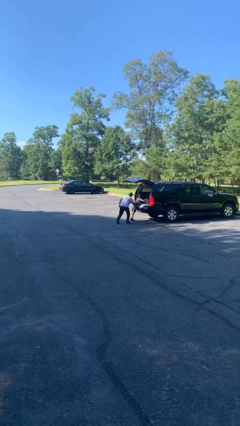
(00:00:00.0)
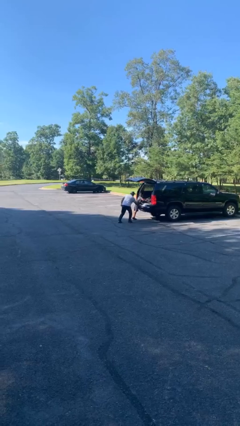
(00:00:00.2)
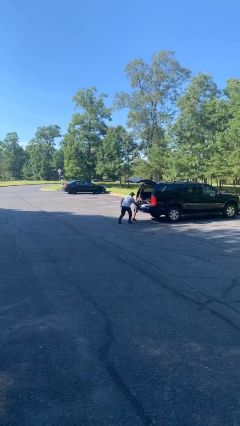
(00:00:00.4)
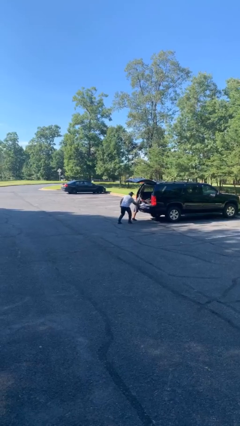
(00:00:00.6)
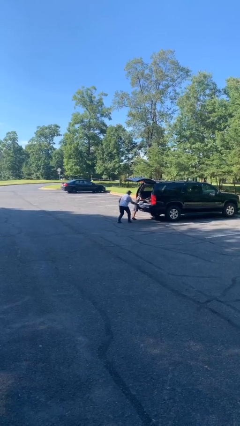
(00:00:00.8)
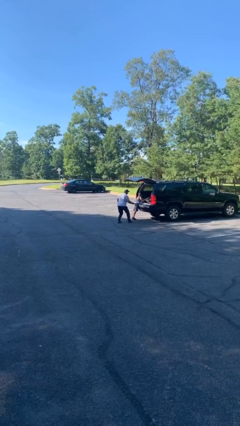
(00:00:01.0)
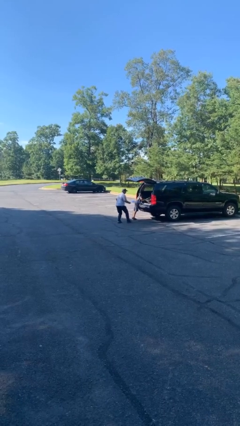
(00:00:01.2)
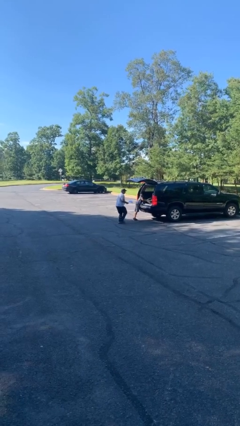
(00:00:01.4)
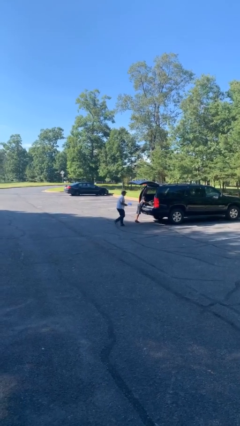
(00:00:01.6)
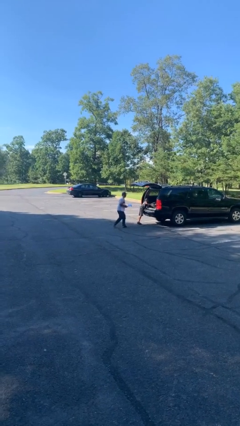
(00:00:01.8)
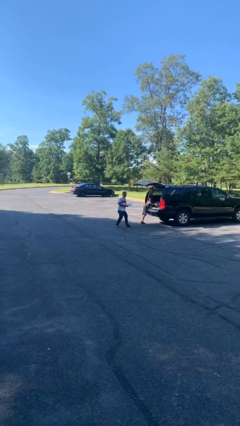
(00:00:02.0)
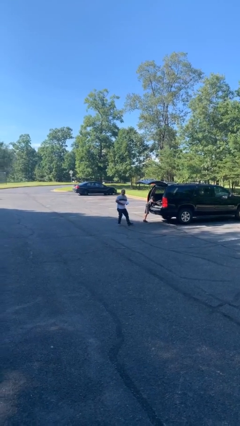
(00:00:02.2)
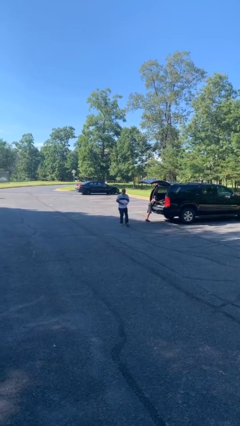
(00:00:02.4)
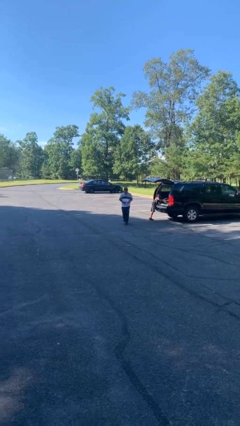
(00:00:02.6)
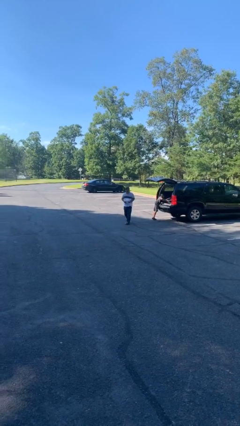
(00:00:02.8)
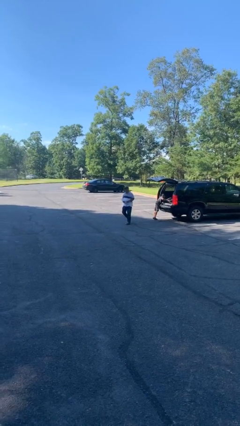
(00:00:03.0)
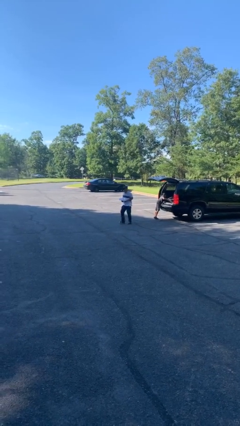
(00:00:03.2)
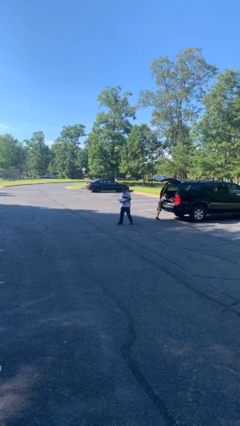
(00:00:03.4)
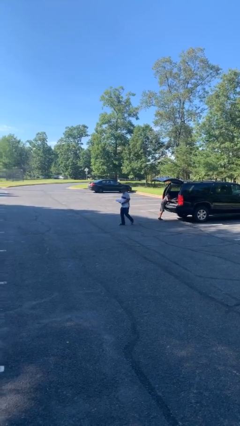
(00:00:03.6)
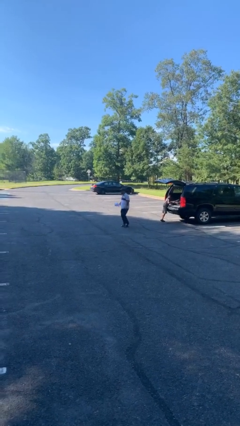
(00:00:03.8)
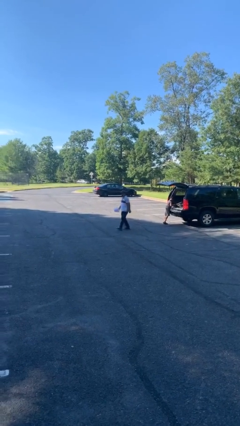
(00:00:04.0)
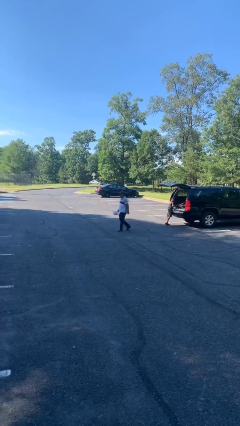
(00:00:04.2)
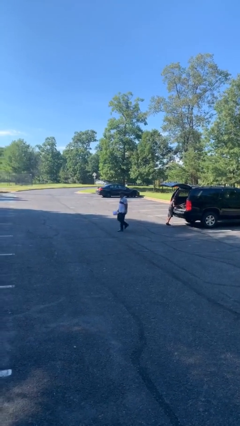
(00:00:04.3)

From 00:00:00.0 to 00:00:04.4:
person steals object from person

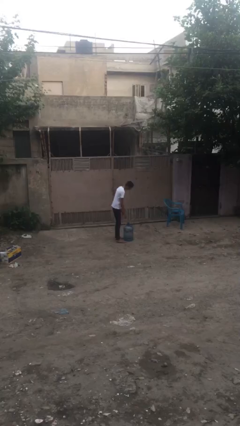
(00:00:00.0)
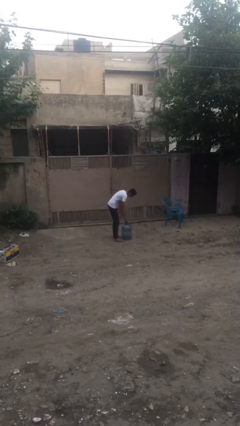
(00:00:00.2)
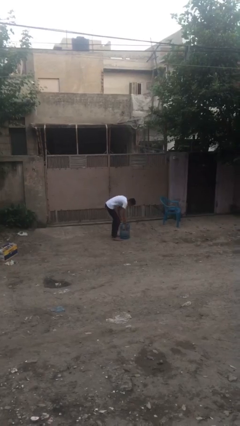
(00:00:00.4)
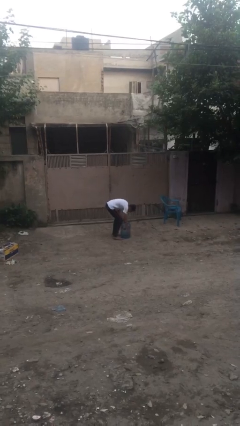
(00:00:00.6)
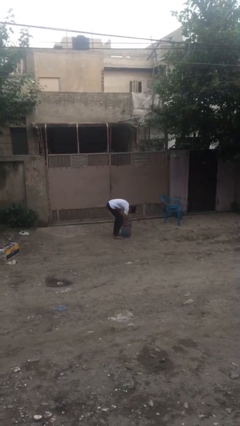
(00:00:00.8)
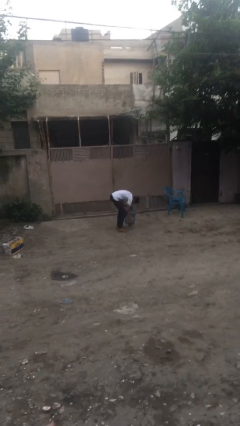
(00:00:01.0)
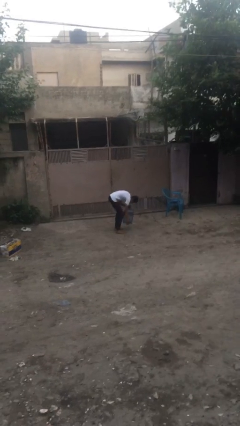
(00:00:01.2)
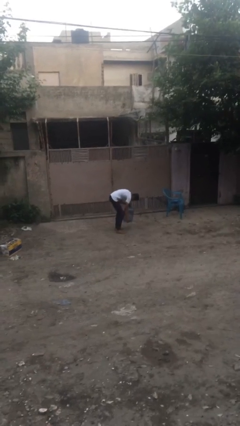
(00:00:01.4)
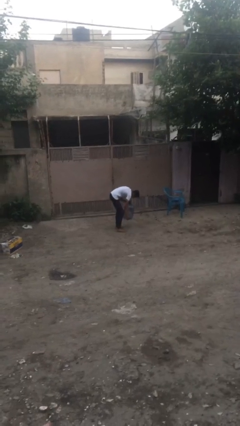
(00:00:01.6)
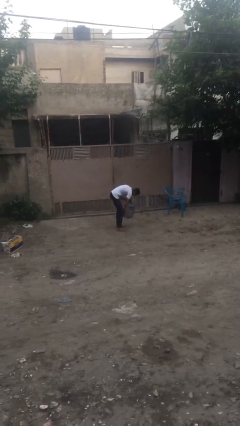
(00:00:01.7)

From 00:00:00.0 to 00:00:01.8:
person picks up object from floor

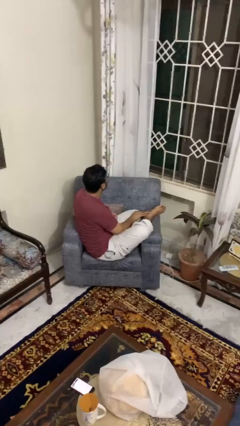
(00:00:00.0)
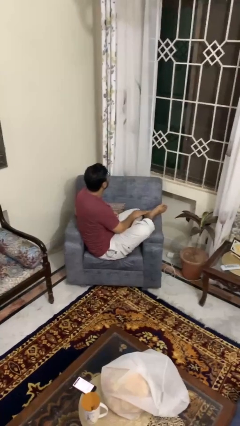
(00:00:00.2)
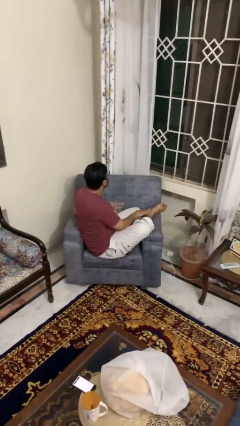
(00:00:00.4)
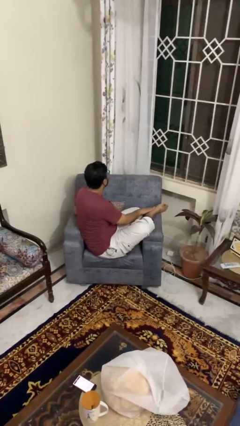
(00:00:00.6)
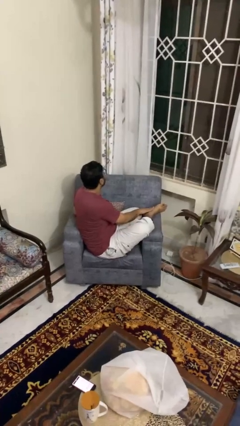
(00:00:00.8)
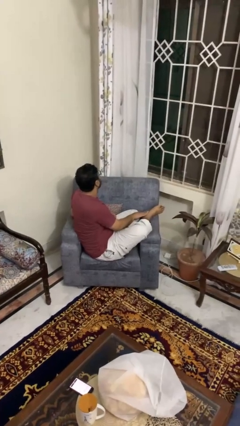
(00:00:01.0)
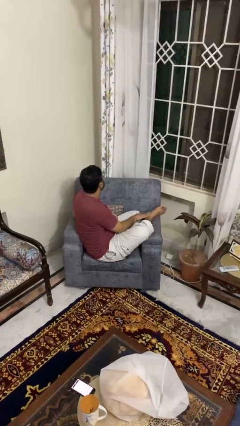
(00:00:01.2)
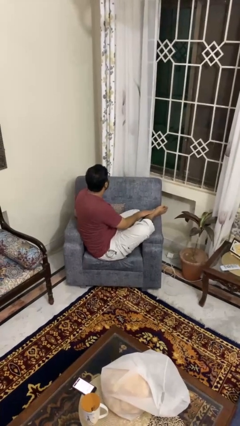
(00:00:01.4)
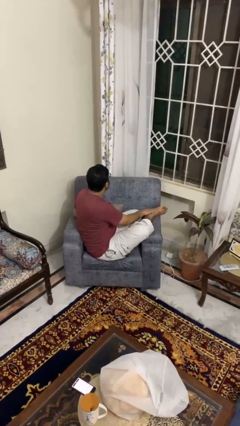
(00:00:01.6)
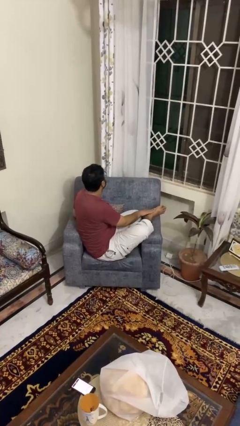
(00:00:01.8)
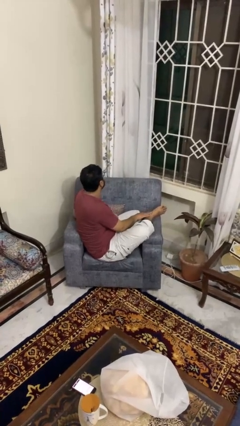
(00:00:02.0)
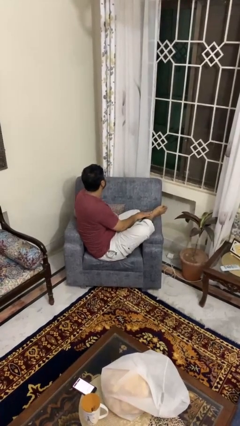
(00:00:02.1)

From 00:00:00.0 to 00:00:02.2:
person rubs foot

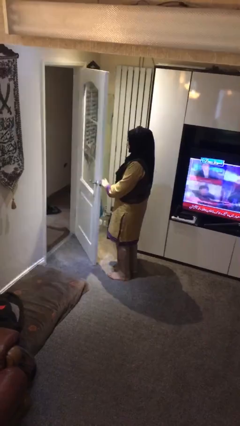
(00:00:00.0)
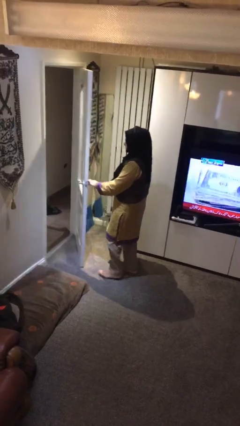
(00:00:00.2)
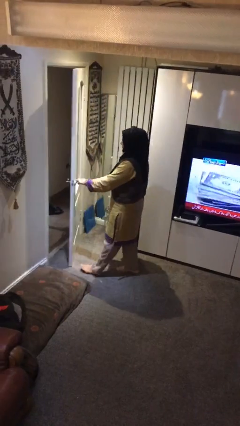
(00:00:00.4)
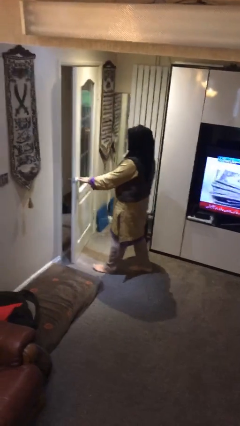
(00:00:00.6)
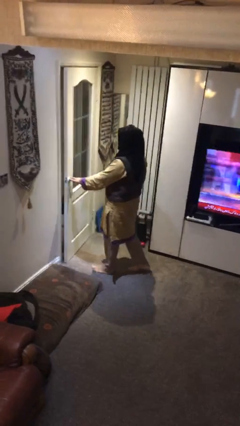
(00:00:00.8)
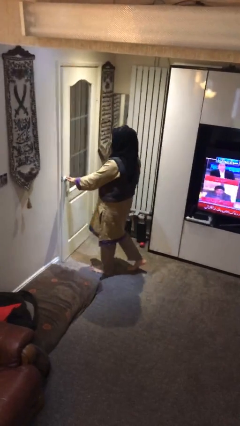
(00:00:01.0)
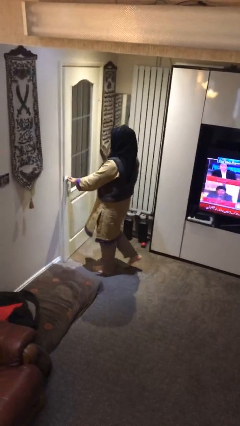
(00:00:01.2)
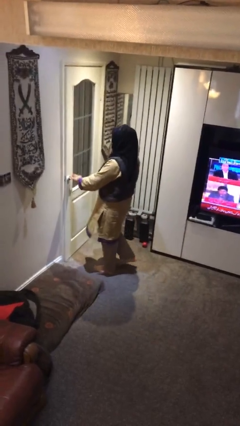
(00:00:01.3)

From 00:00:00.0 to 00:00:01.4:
person closes facility door

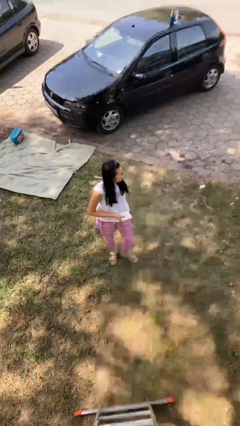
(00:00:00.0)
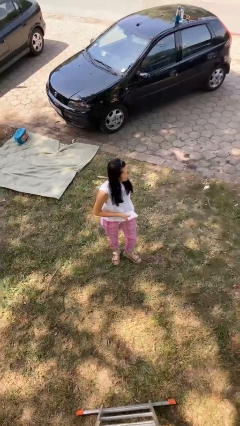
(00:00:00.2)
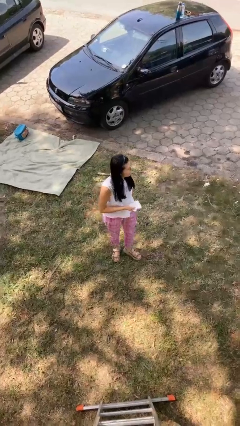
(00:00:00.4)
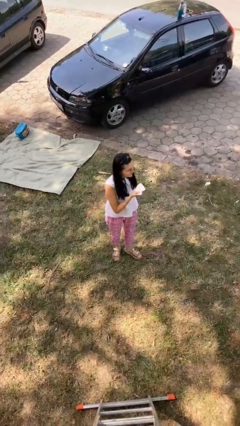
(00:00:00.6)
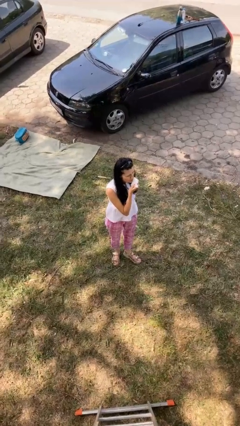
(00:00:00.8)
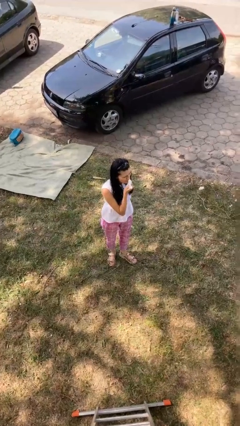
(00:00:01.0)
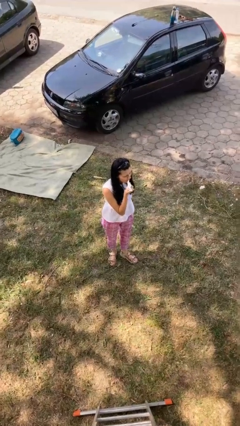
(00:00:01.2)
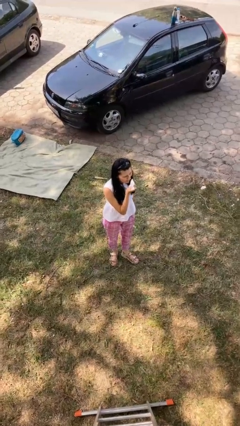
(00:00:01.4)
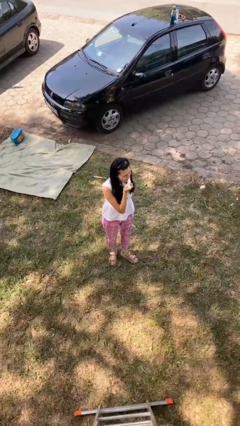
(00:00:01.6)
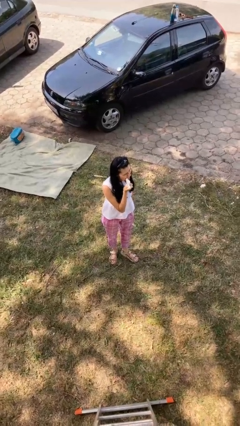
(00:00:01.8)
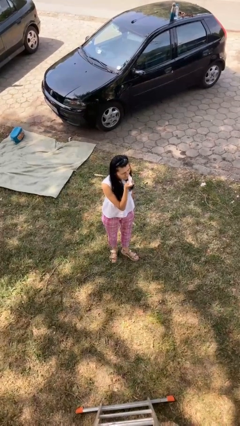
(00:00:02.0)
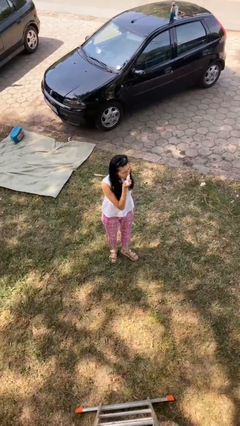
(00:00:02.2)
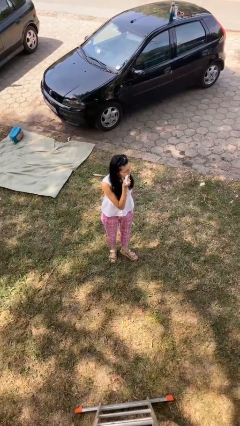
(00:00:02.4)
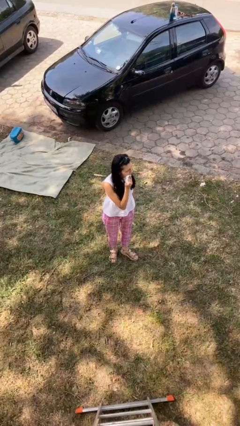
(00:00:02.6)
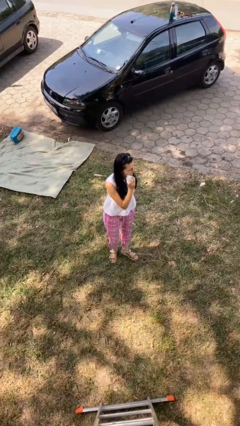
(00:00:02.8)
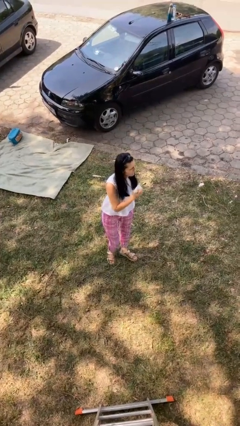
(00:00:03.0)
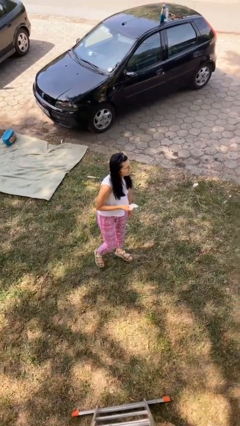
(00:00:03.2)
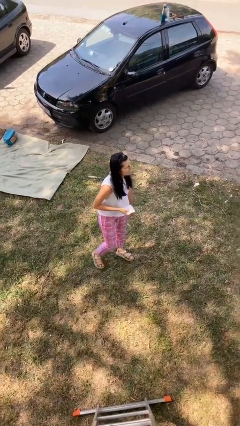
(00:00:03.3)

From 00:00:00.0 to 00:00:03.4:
person wipes mouth with napkin

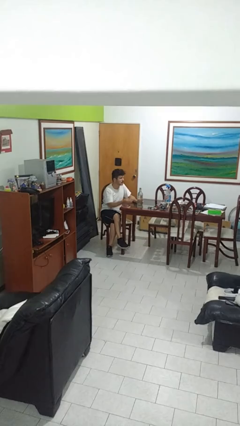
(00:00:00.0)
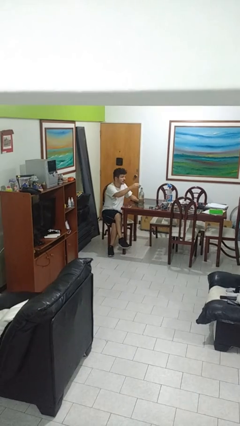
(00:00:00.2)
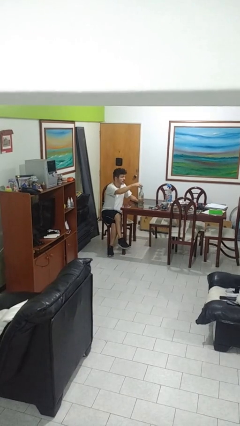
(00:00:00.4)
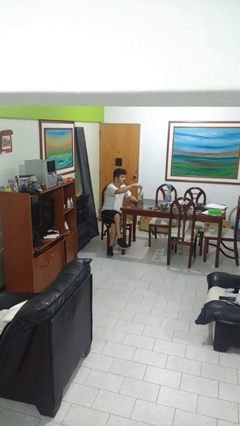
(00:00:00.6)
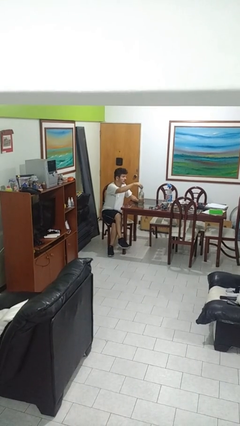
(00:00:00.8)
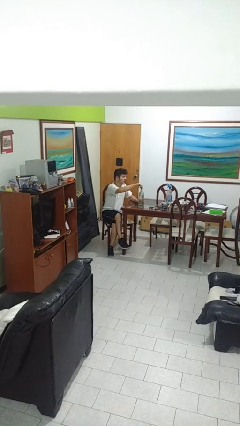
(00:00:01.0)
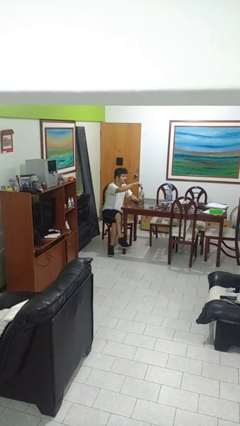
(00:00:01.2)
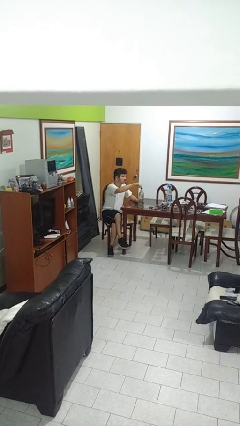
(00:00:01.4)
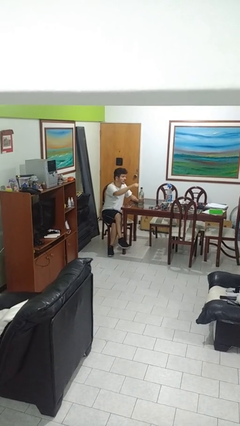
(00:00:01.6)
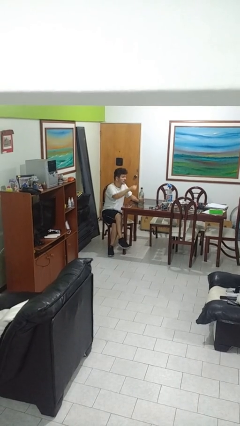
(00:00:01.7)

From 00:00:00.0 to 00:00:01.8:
person screws lid to bottle

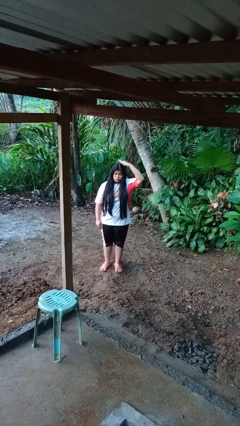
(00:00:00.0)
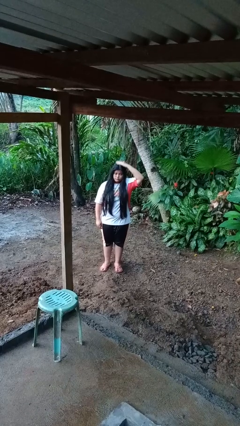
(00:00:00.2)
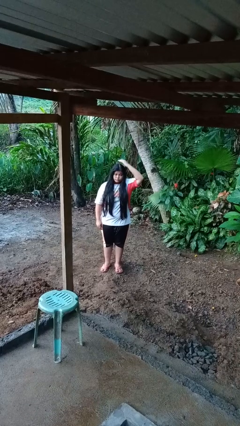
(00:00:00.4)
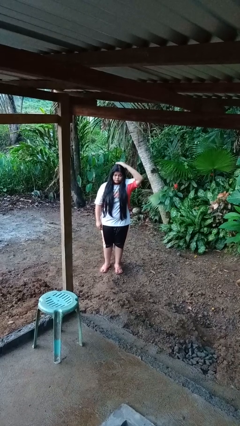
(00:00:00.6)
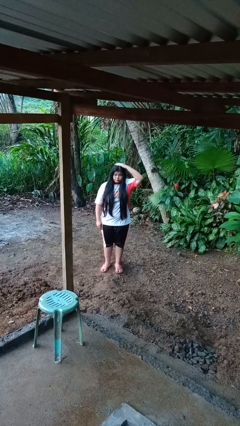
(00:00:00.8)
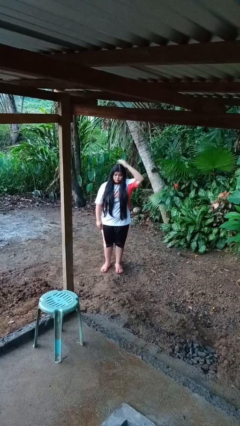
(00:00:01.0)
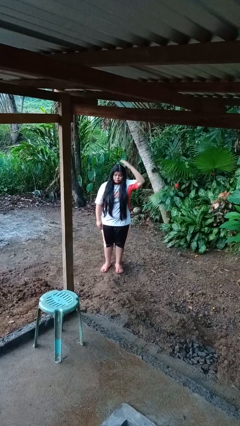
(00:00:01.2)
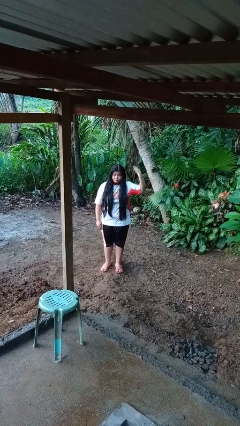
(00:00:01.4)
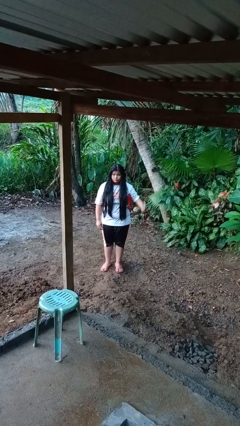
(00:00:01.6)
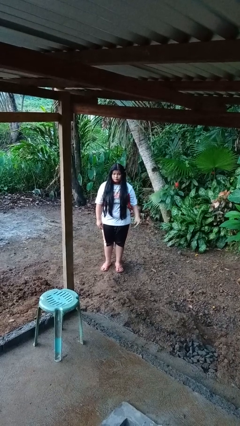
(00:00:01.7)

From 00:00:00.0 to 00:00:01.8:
person pats head
